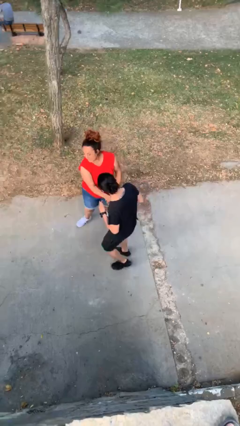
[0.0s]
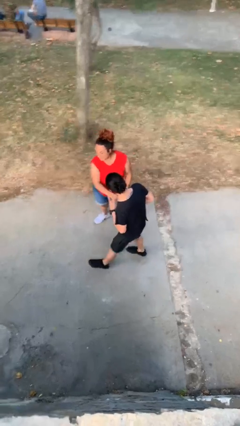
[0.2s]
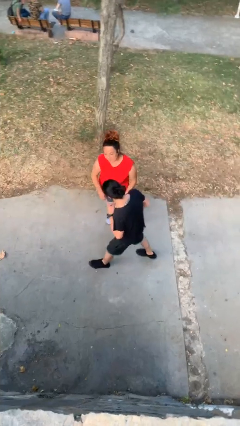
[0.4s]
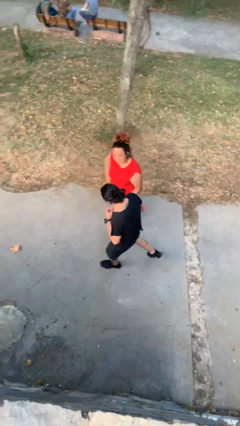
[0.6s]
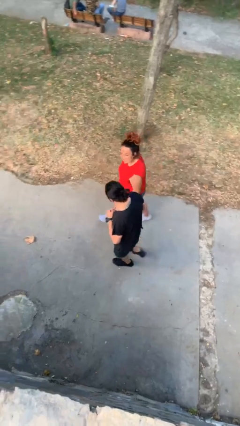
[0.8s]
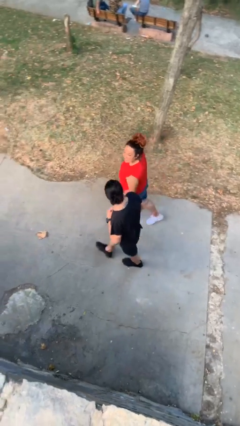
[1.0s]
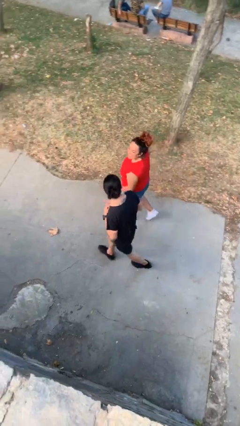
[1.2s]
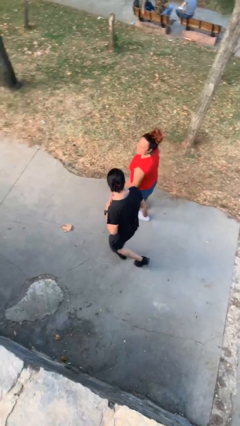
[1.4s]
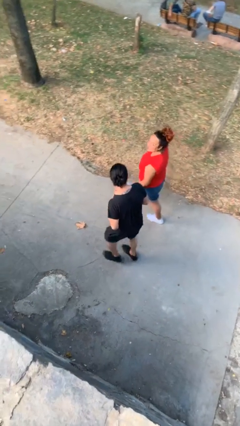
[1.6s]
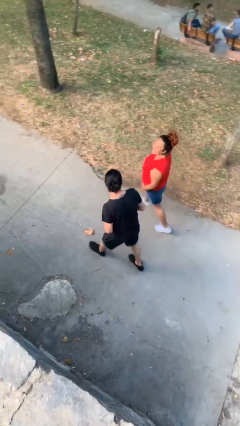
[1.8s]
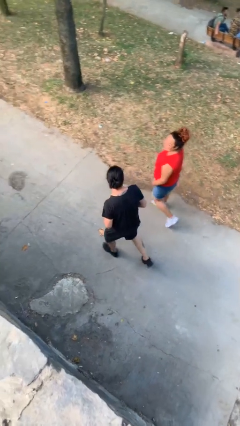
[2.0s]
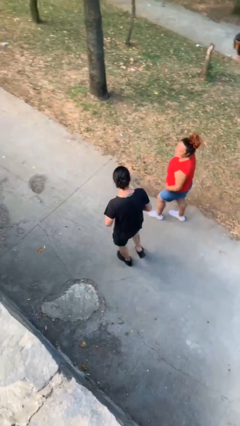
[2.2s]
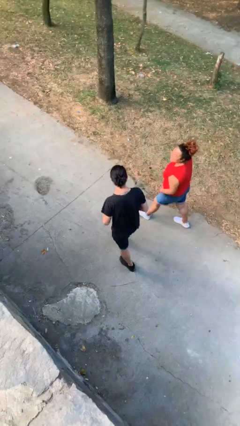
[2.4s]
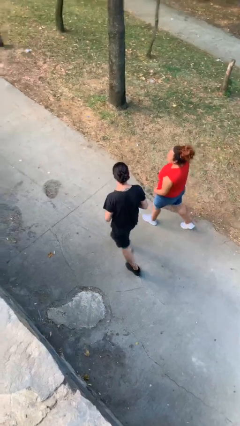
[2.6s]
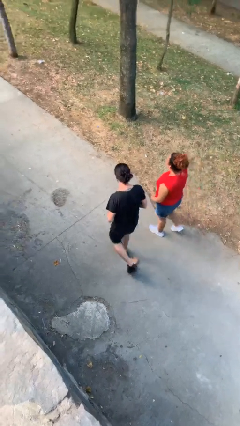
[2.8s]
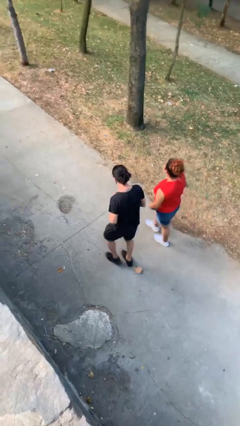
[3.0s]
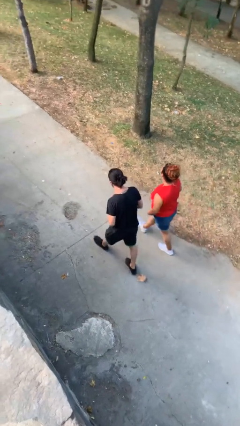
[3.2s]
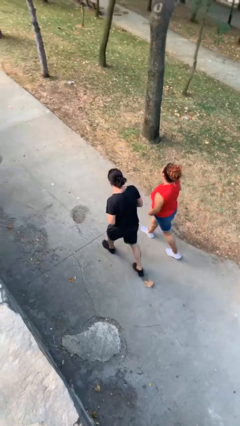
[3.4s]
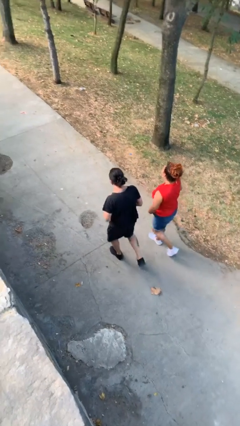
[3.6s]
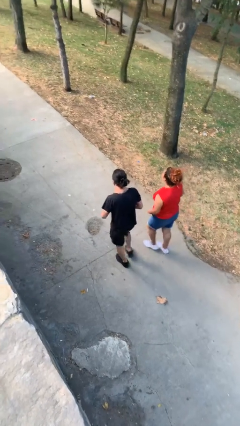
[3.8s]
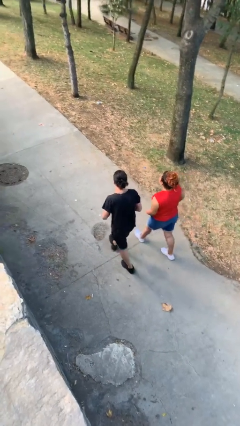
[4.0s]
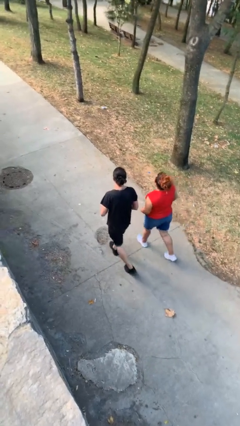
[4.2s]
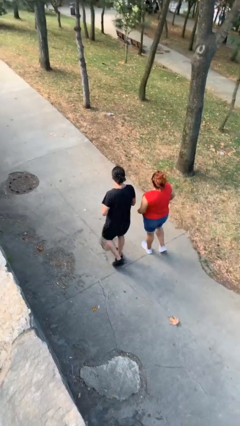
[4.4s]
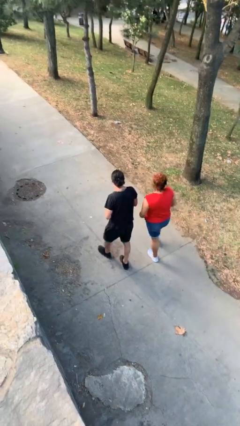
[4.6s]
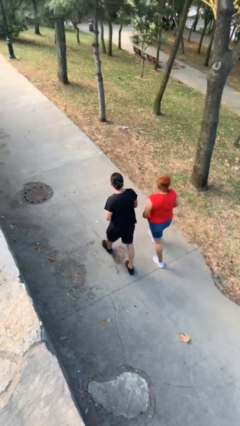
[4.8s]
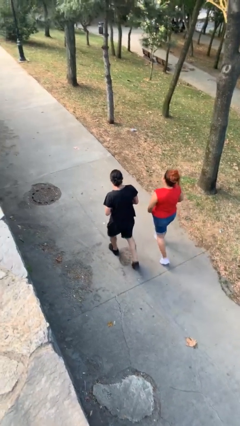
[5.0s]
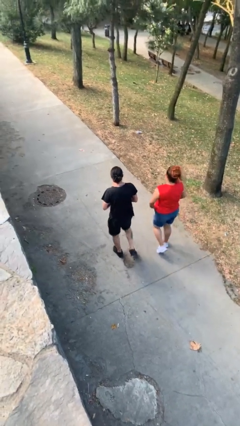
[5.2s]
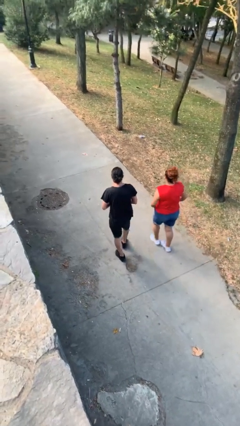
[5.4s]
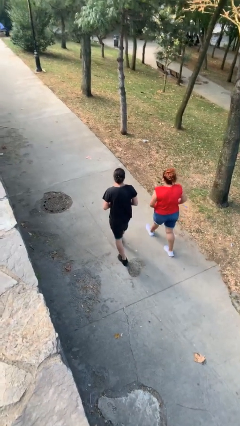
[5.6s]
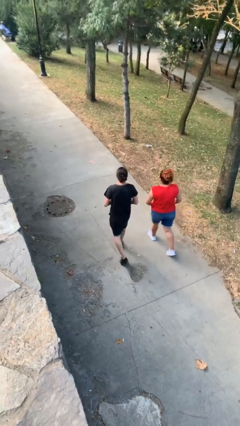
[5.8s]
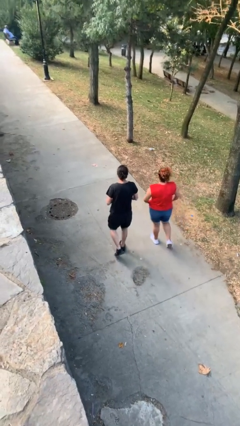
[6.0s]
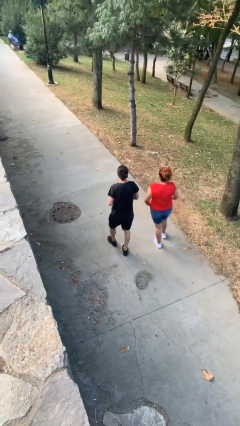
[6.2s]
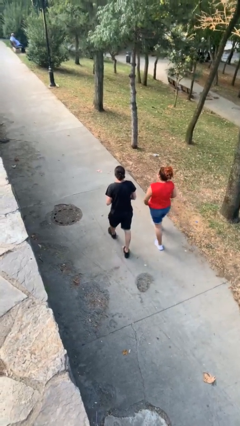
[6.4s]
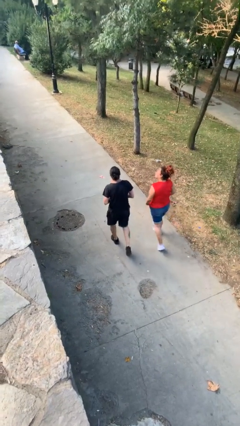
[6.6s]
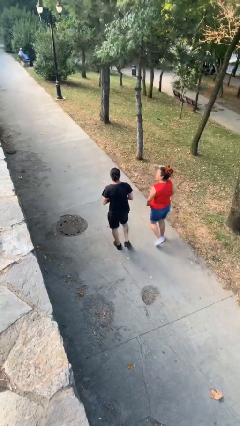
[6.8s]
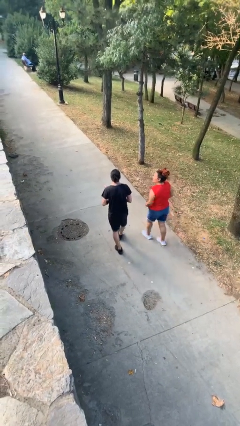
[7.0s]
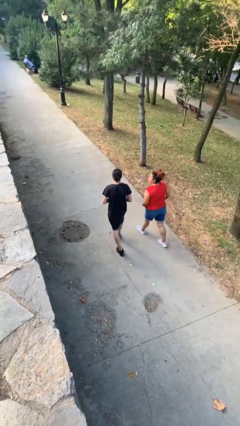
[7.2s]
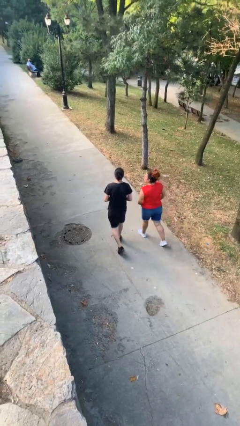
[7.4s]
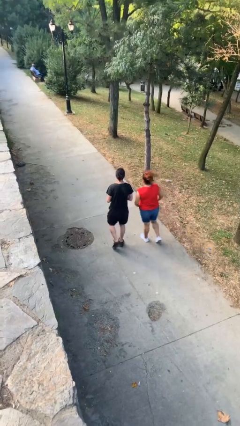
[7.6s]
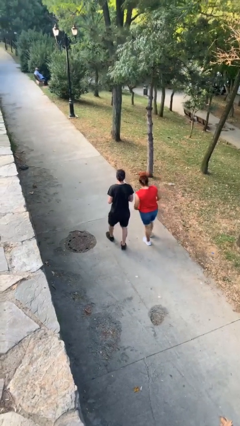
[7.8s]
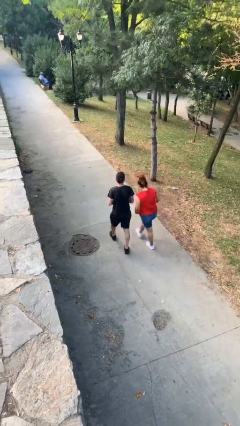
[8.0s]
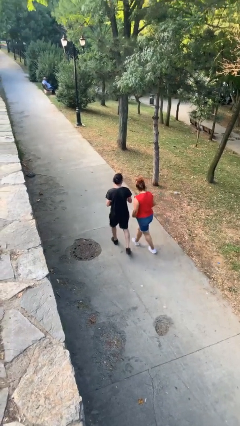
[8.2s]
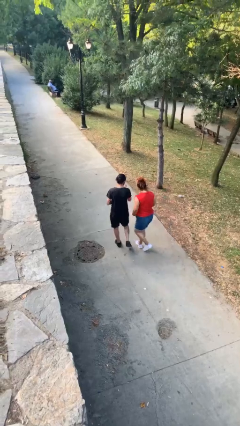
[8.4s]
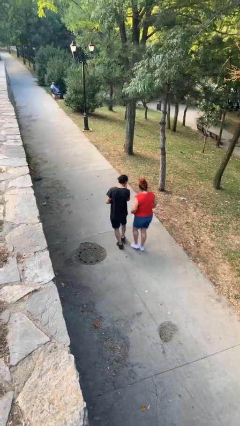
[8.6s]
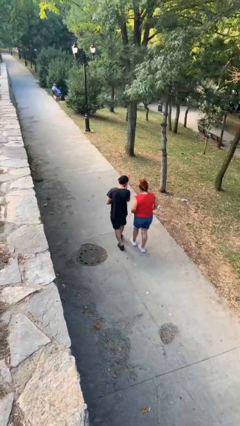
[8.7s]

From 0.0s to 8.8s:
person talks to person

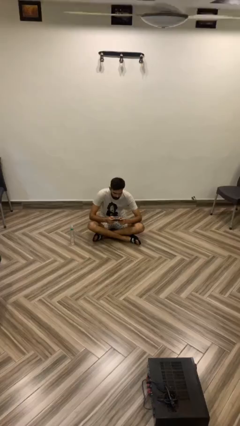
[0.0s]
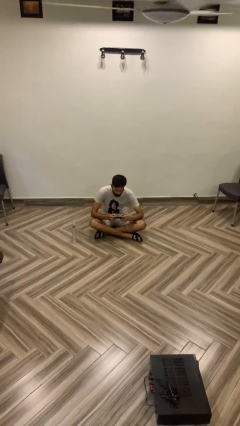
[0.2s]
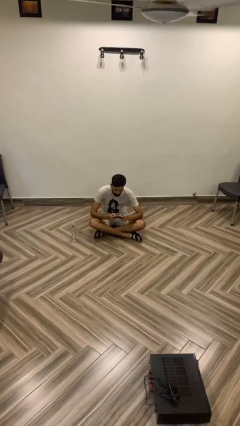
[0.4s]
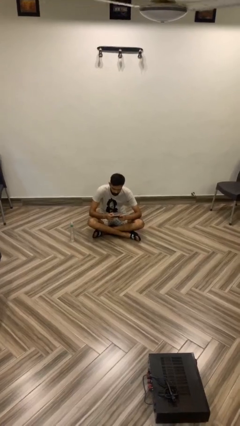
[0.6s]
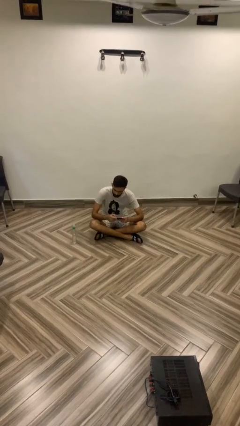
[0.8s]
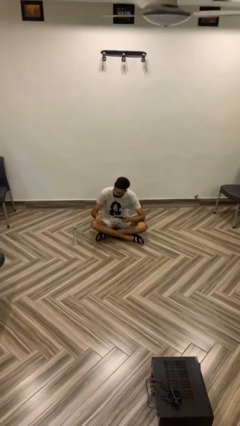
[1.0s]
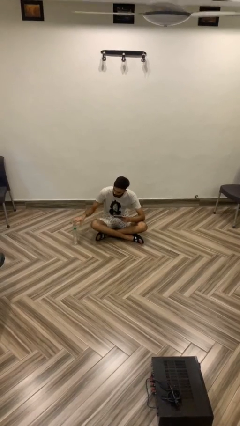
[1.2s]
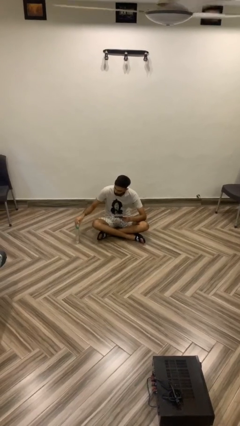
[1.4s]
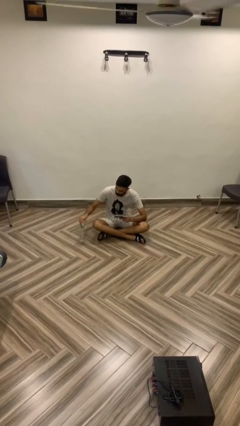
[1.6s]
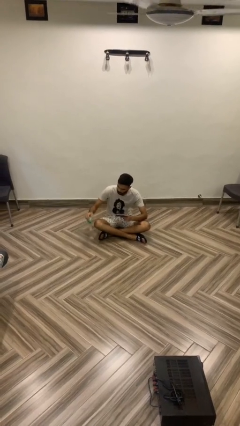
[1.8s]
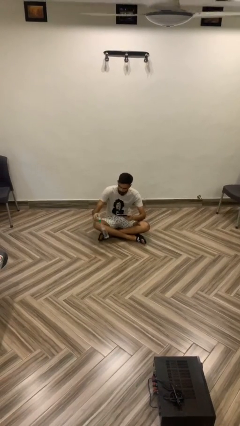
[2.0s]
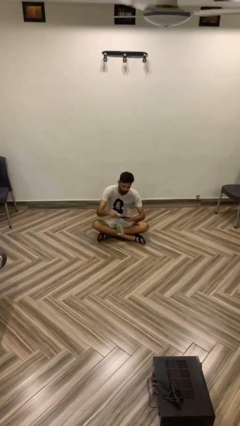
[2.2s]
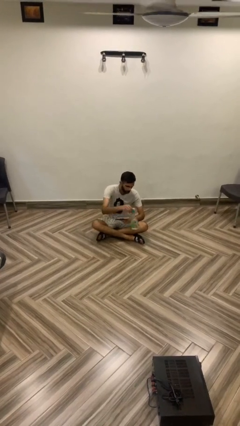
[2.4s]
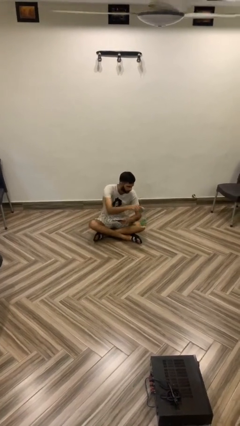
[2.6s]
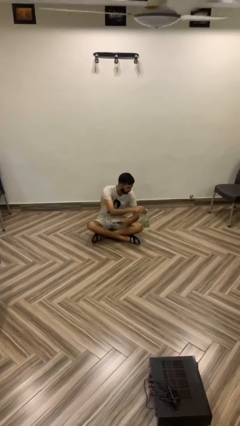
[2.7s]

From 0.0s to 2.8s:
person picks up object from floor

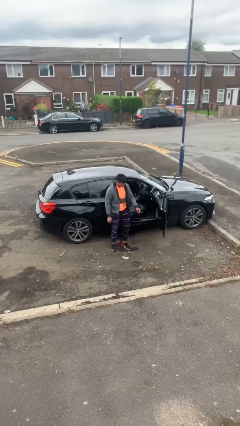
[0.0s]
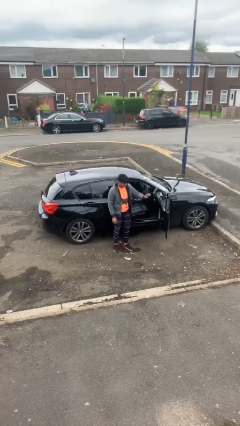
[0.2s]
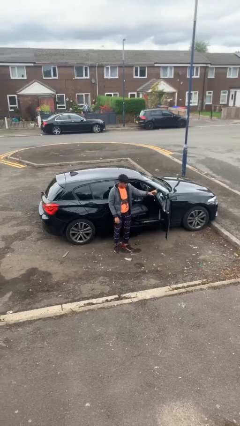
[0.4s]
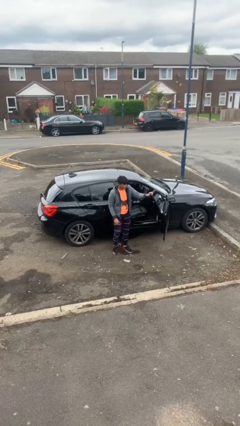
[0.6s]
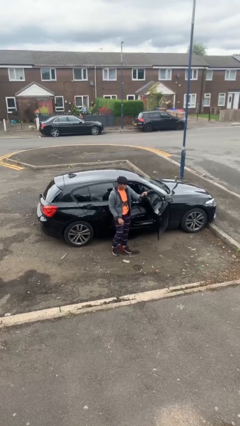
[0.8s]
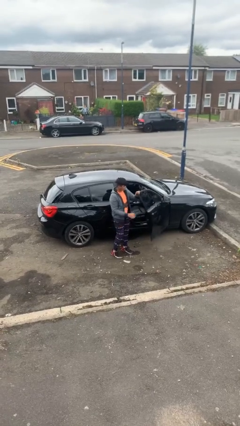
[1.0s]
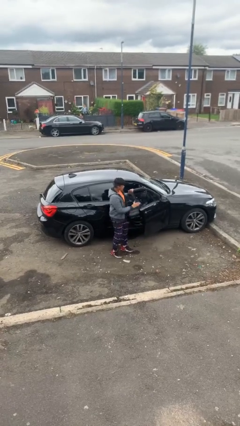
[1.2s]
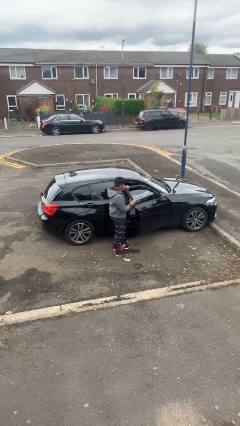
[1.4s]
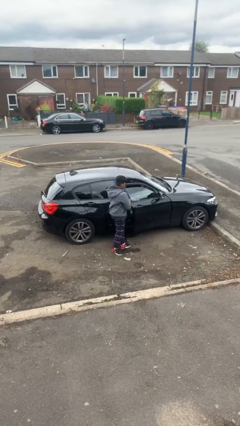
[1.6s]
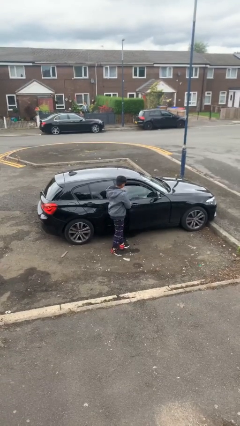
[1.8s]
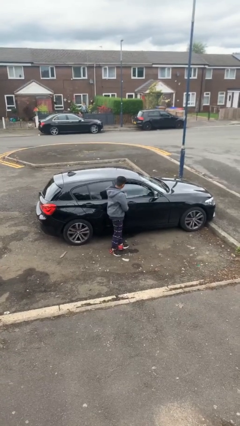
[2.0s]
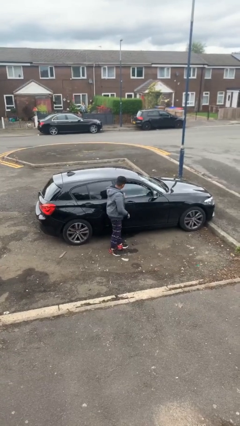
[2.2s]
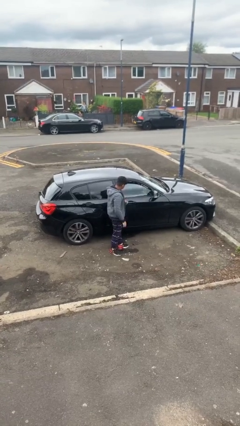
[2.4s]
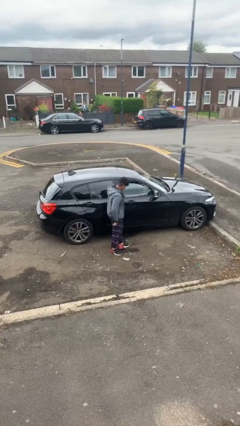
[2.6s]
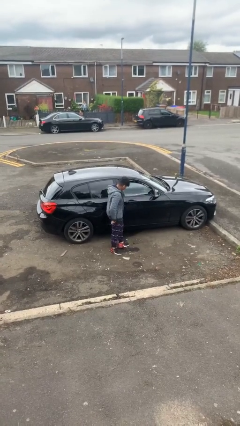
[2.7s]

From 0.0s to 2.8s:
person closes car door

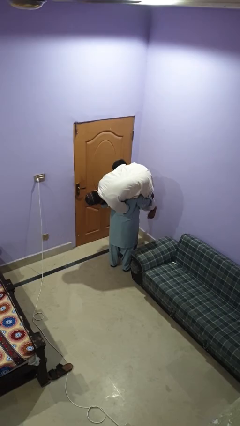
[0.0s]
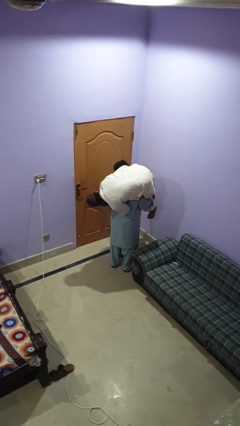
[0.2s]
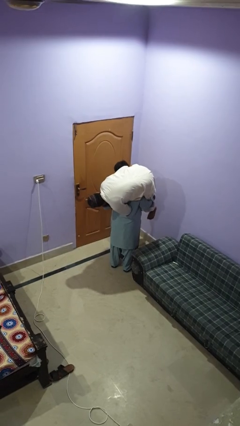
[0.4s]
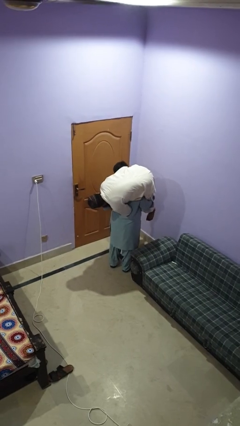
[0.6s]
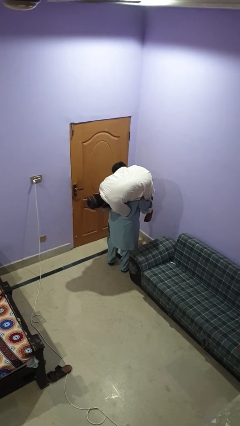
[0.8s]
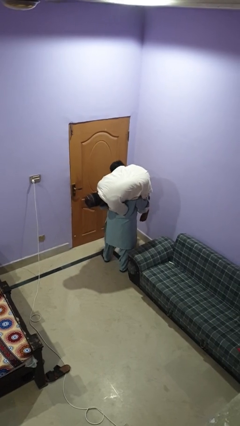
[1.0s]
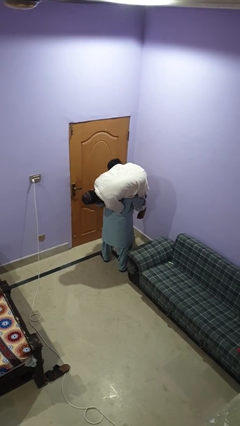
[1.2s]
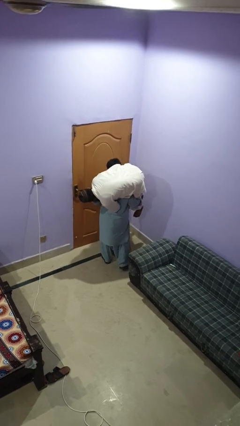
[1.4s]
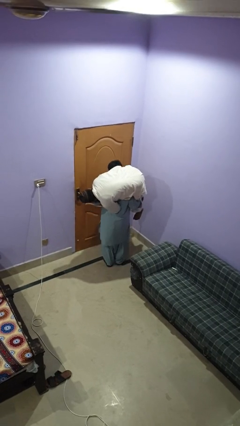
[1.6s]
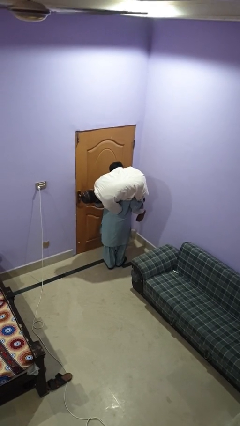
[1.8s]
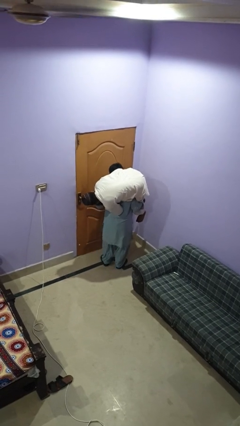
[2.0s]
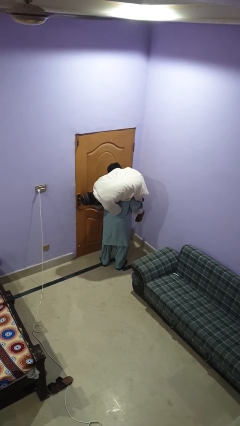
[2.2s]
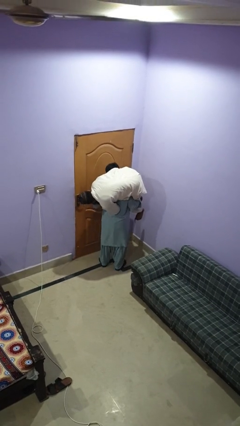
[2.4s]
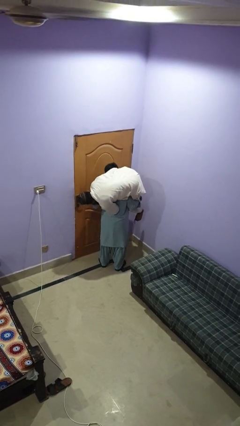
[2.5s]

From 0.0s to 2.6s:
person carries person on shoulders

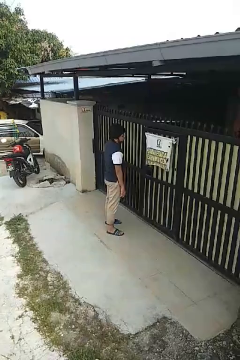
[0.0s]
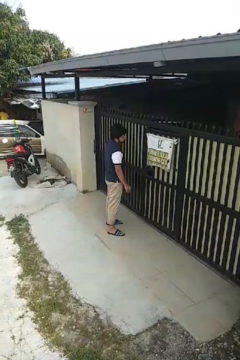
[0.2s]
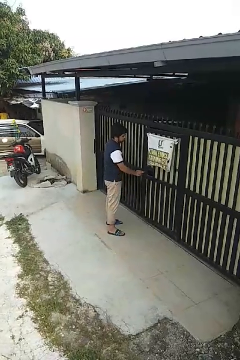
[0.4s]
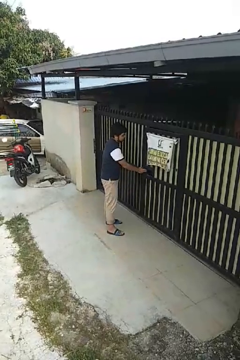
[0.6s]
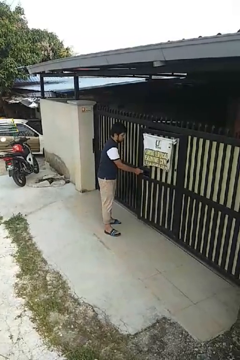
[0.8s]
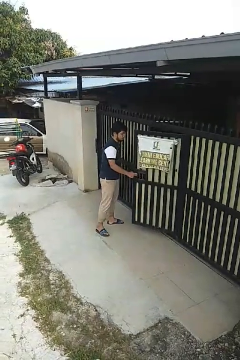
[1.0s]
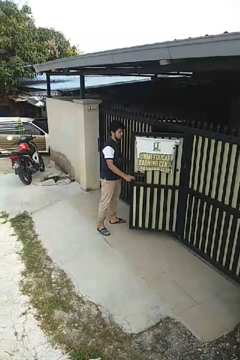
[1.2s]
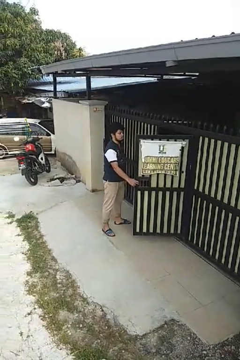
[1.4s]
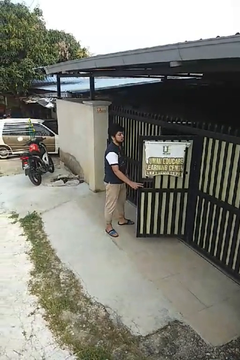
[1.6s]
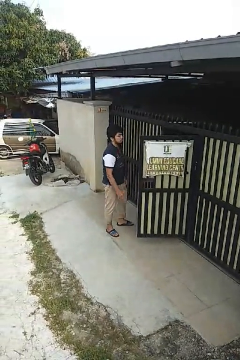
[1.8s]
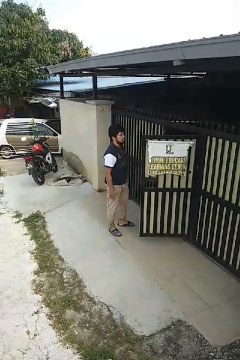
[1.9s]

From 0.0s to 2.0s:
person opens gate
